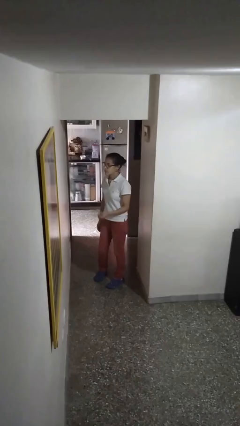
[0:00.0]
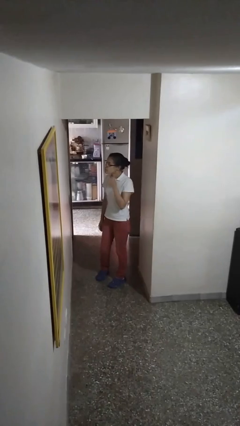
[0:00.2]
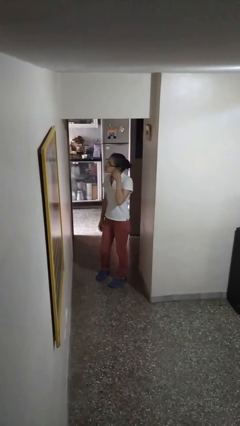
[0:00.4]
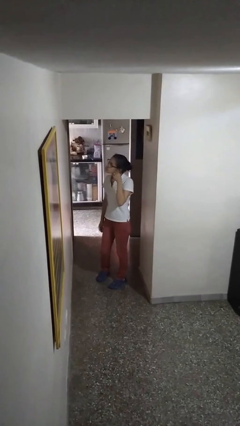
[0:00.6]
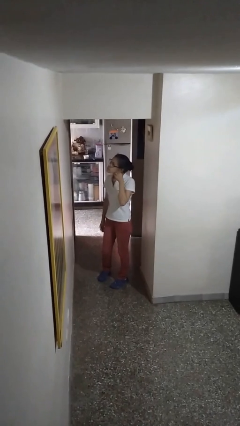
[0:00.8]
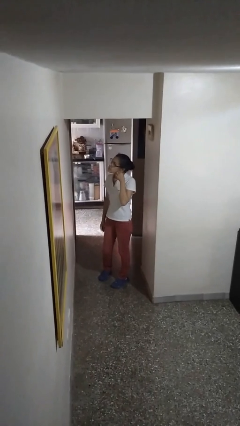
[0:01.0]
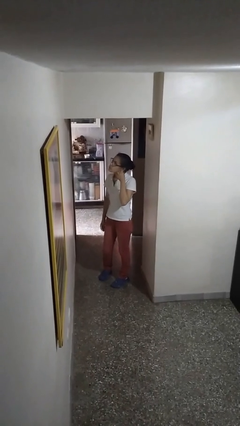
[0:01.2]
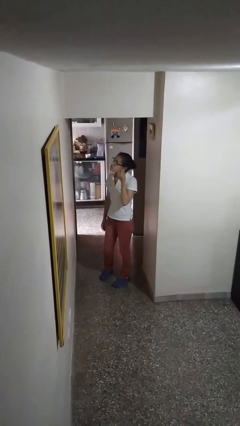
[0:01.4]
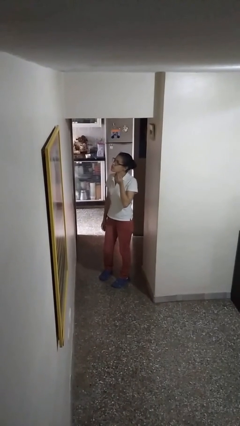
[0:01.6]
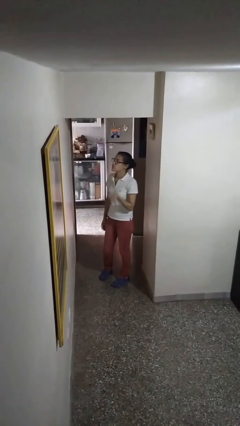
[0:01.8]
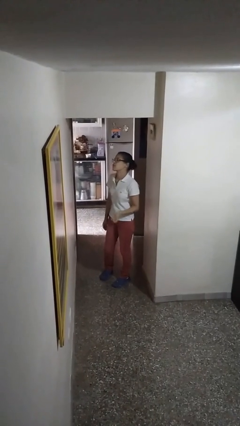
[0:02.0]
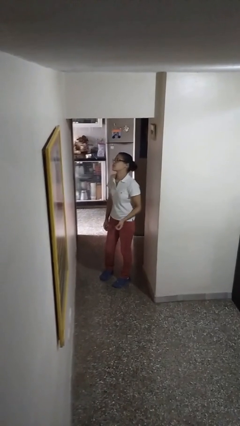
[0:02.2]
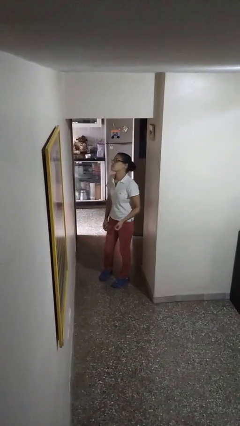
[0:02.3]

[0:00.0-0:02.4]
person takes off earrings

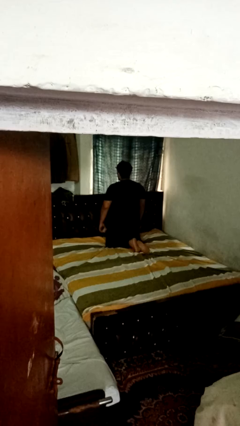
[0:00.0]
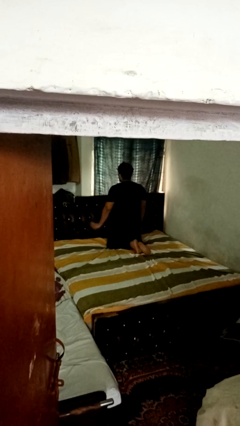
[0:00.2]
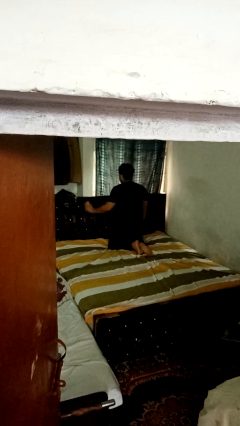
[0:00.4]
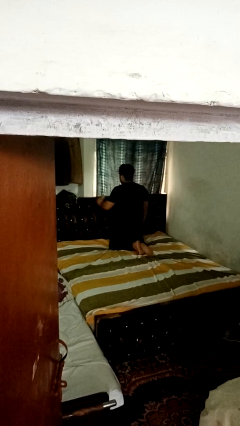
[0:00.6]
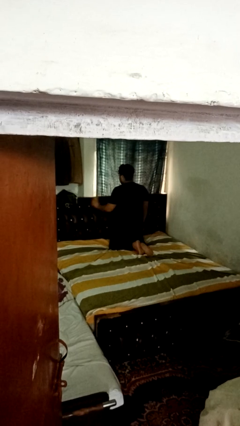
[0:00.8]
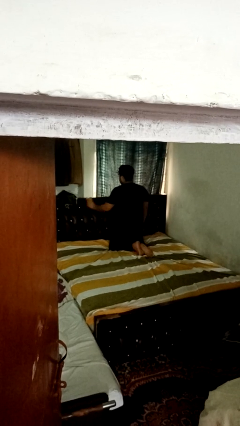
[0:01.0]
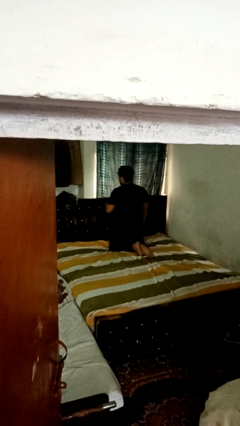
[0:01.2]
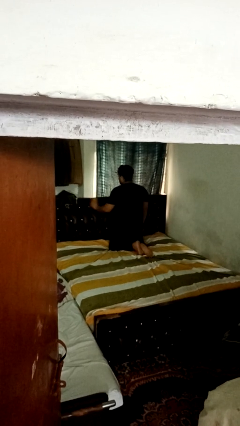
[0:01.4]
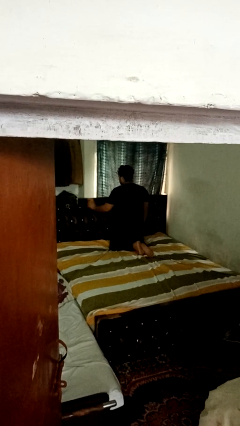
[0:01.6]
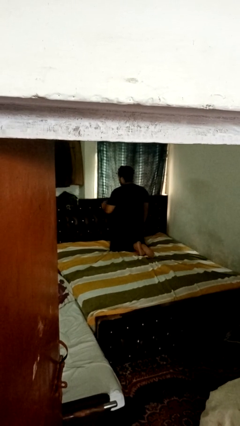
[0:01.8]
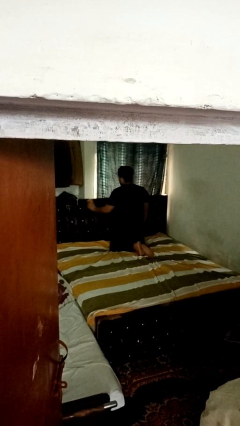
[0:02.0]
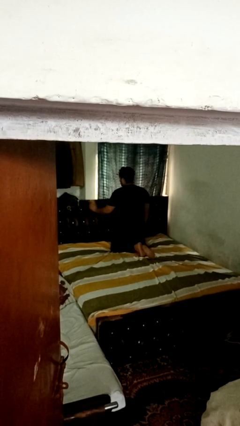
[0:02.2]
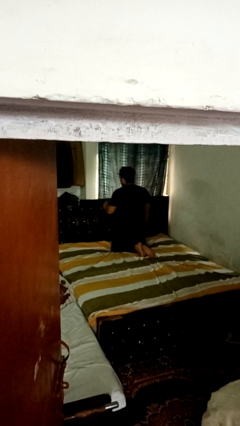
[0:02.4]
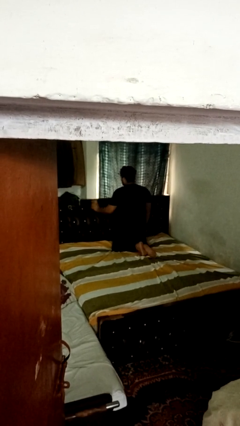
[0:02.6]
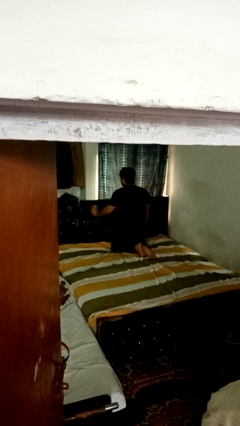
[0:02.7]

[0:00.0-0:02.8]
person dusts furniture

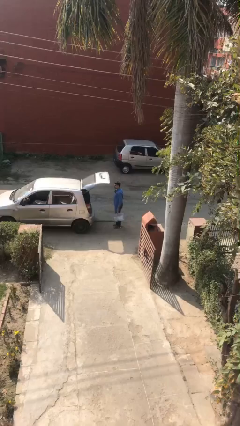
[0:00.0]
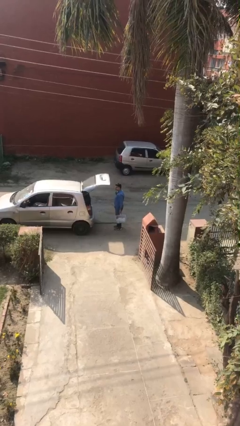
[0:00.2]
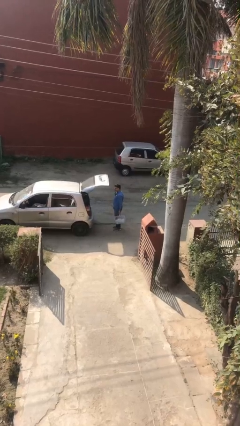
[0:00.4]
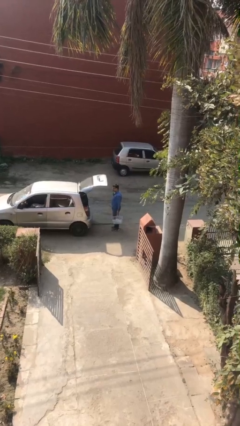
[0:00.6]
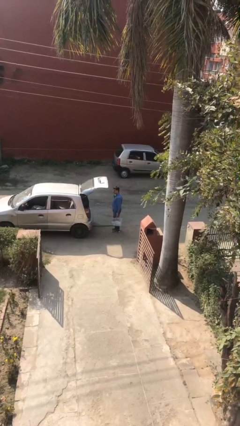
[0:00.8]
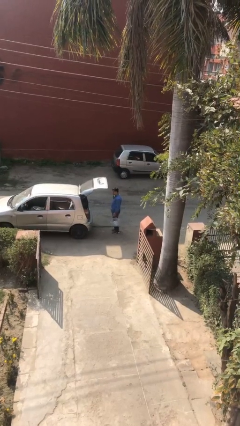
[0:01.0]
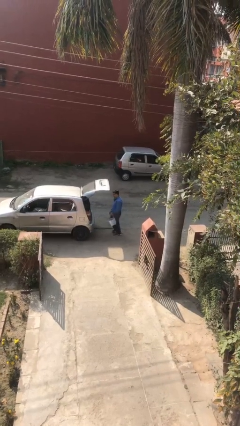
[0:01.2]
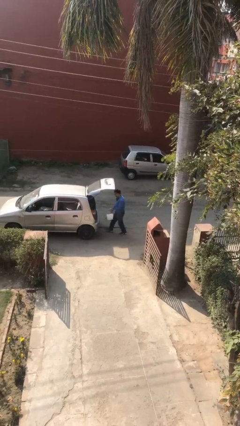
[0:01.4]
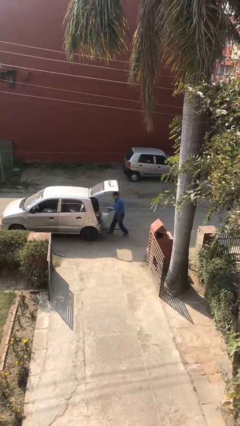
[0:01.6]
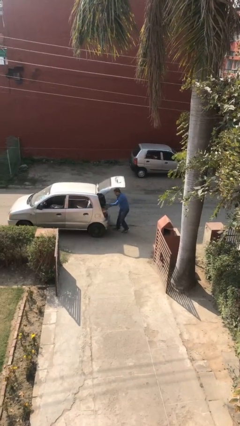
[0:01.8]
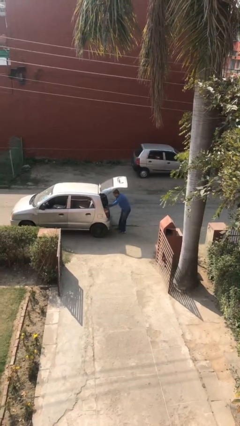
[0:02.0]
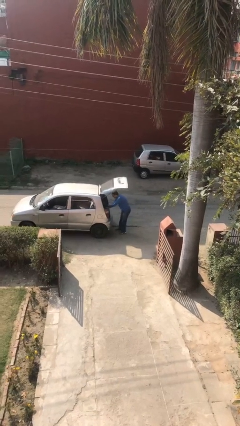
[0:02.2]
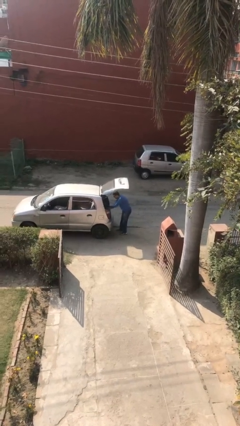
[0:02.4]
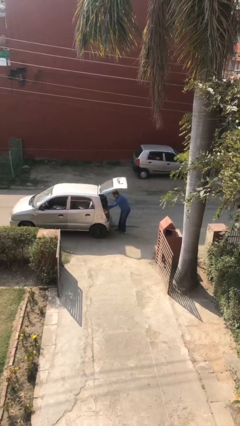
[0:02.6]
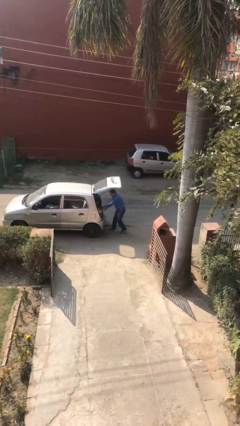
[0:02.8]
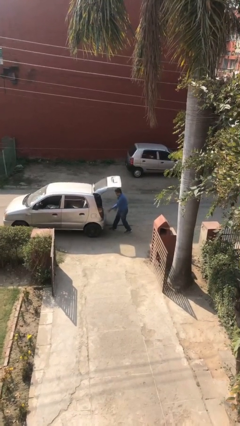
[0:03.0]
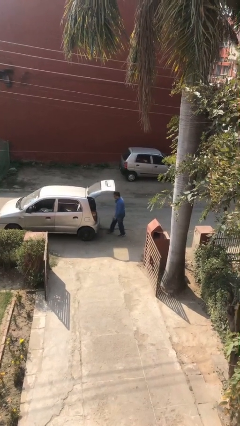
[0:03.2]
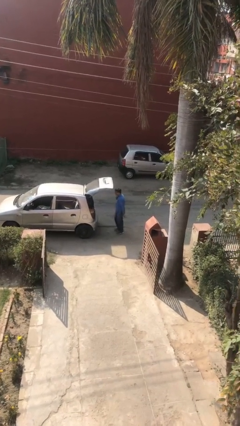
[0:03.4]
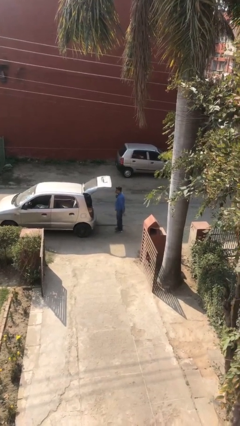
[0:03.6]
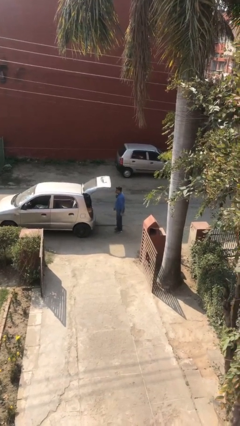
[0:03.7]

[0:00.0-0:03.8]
person loads car

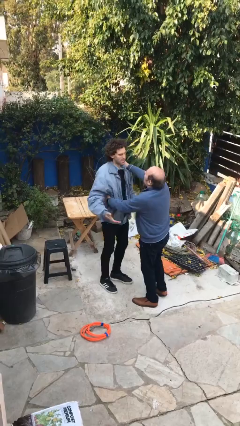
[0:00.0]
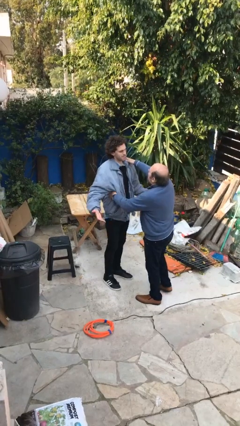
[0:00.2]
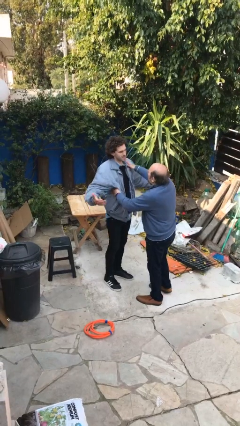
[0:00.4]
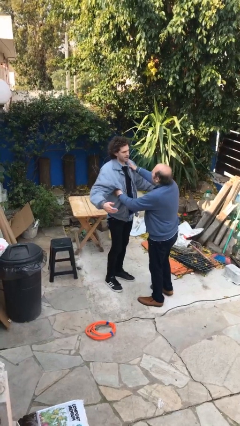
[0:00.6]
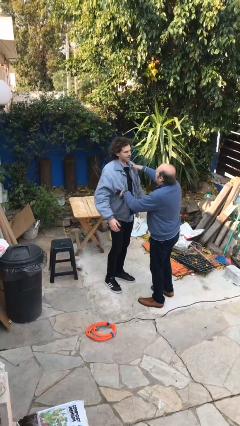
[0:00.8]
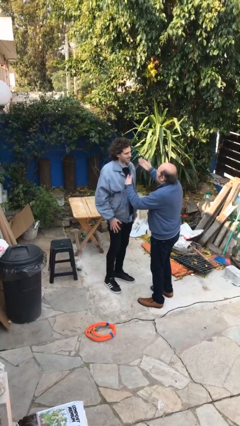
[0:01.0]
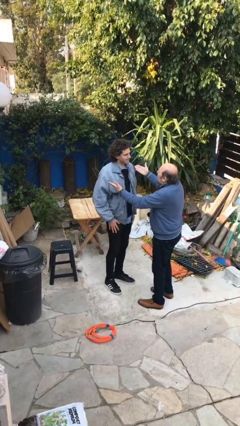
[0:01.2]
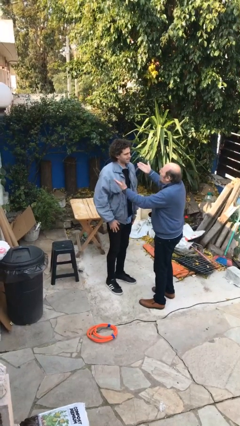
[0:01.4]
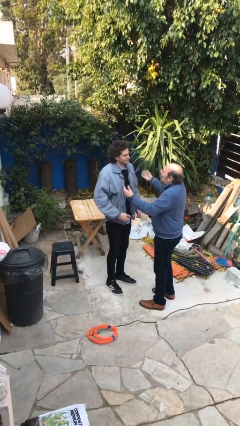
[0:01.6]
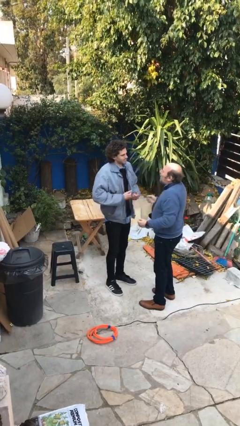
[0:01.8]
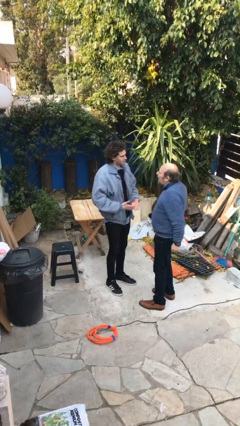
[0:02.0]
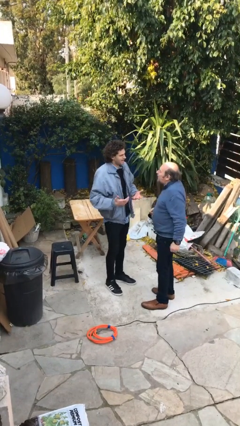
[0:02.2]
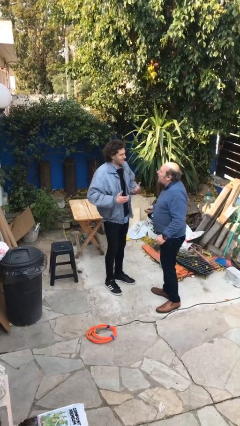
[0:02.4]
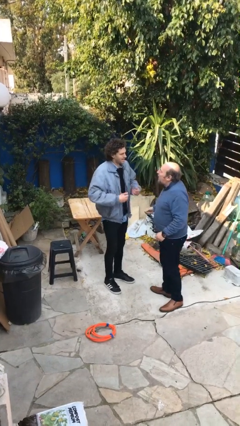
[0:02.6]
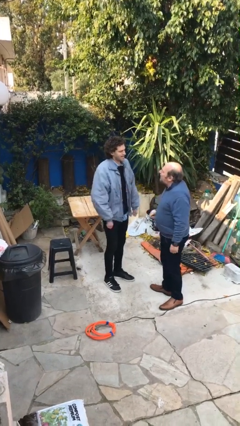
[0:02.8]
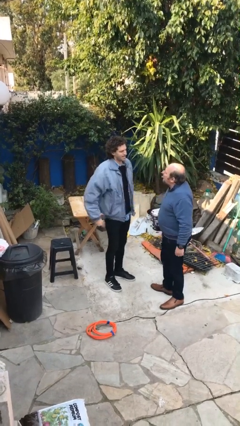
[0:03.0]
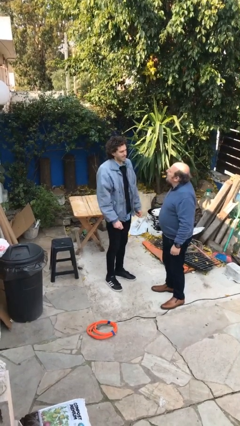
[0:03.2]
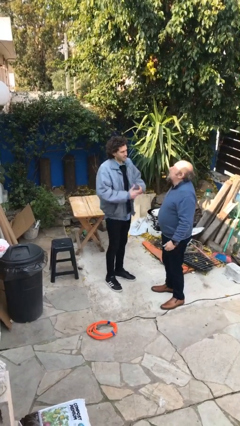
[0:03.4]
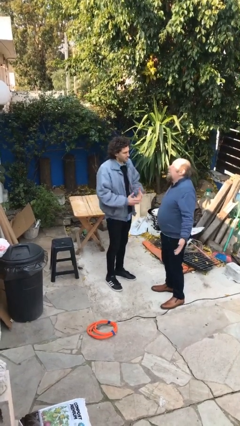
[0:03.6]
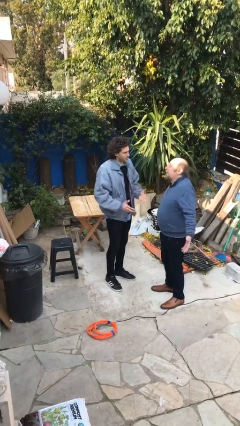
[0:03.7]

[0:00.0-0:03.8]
person talks to person

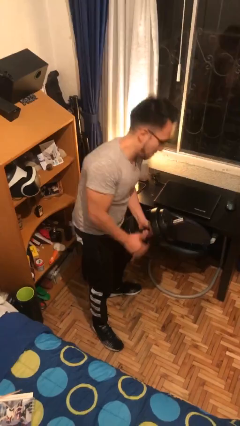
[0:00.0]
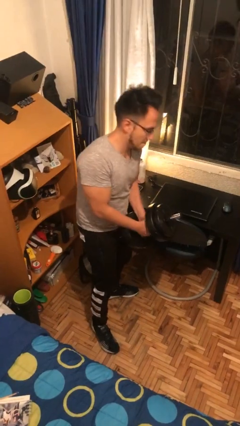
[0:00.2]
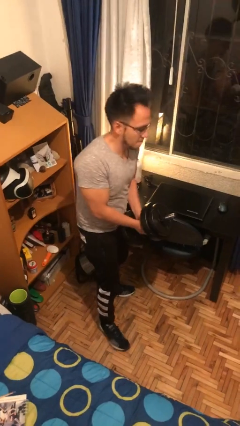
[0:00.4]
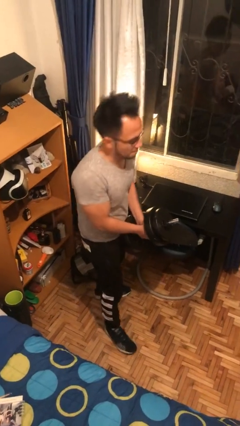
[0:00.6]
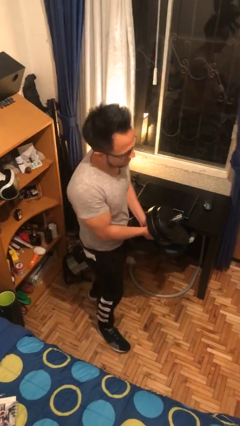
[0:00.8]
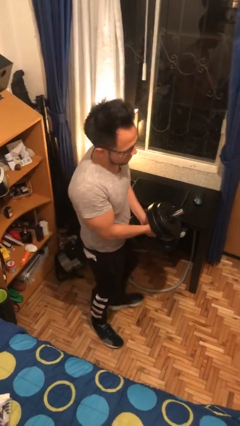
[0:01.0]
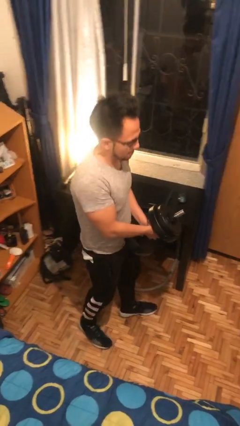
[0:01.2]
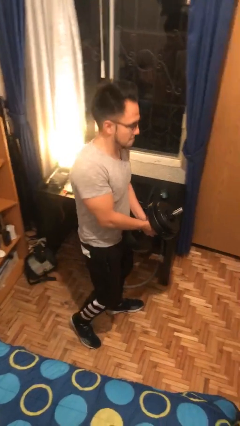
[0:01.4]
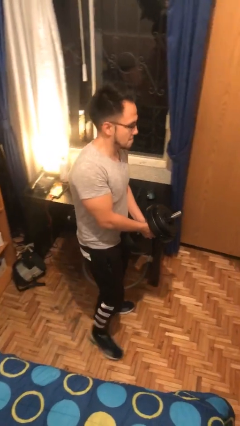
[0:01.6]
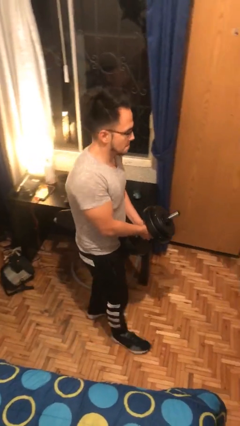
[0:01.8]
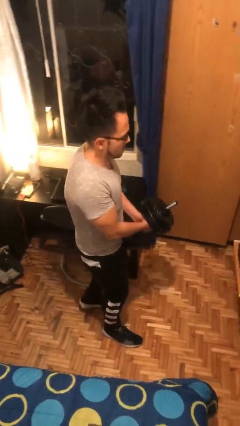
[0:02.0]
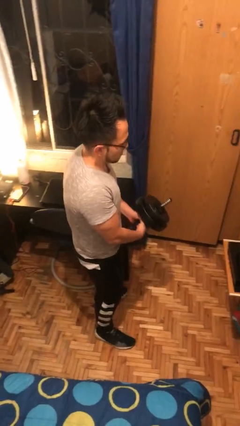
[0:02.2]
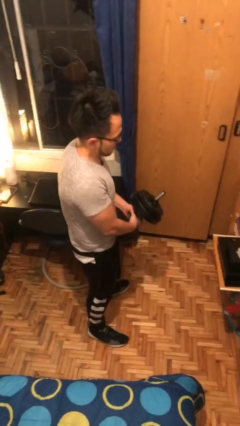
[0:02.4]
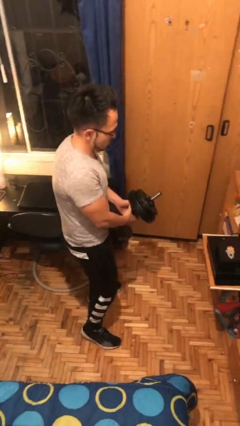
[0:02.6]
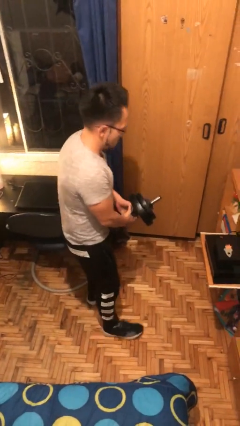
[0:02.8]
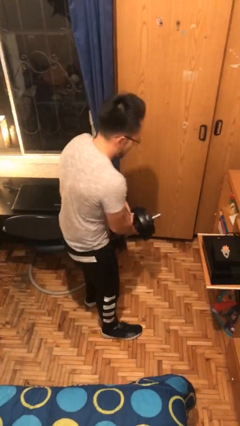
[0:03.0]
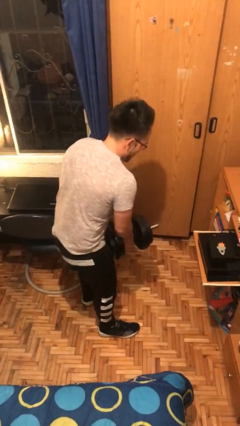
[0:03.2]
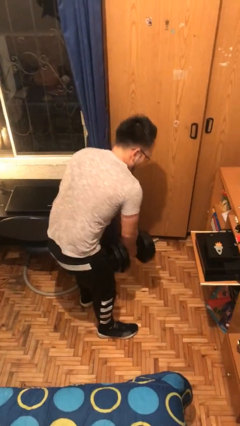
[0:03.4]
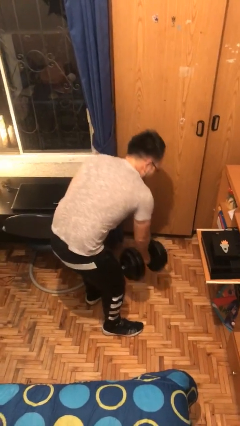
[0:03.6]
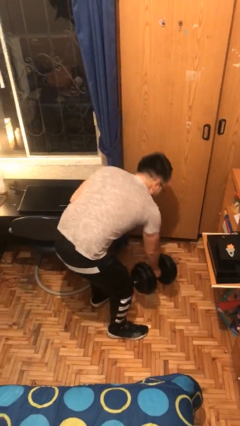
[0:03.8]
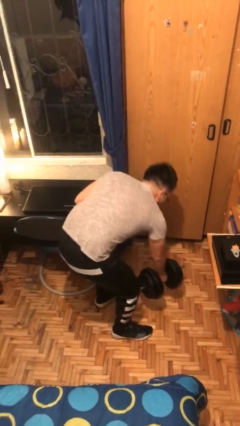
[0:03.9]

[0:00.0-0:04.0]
person carries heavy object

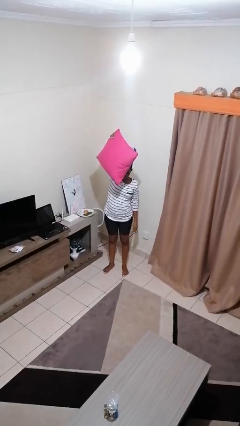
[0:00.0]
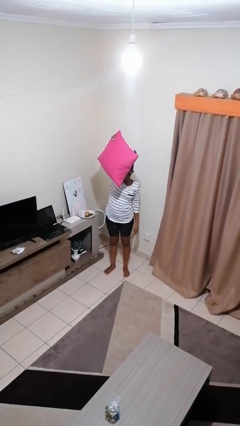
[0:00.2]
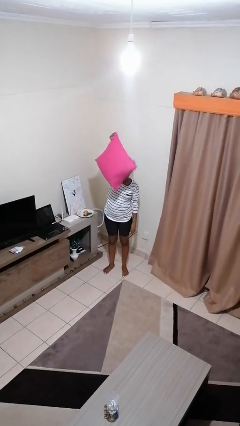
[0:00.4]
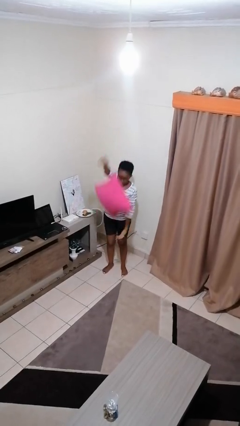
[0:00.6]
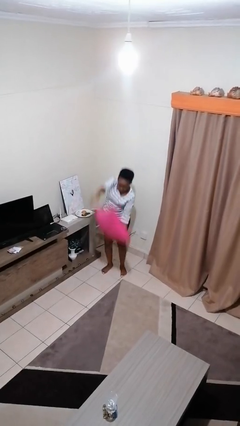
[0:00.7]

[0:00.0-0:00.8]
person drops object
